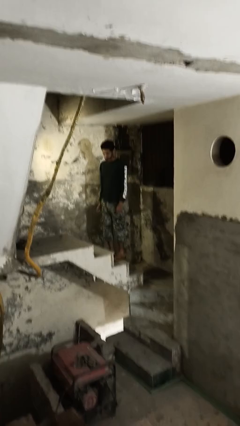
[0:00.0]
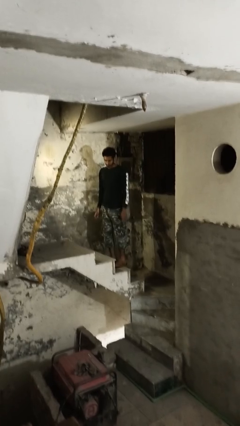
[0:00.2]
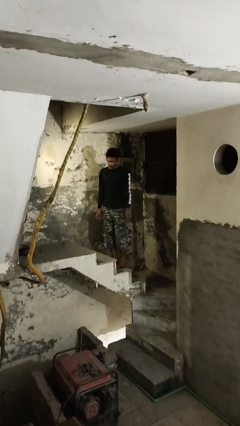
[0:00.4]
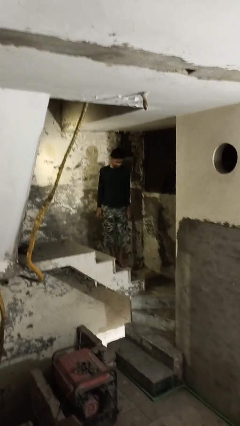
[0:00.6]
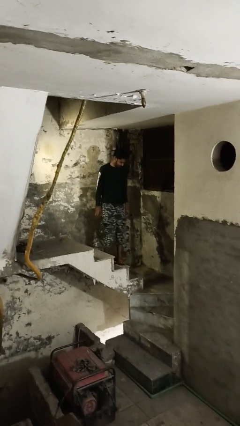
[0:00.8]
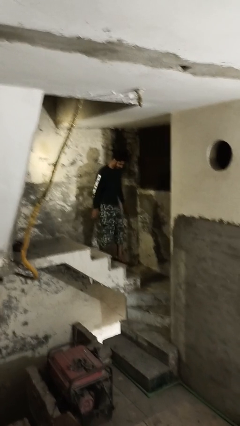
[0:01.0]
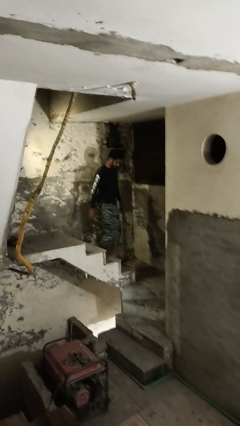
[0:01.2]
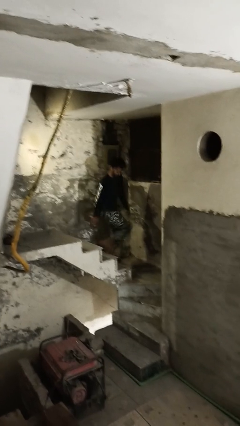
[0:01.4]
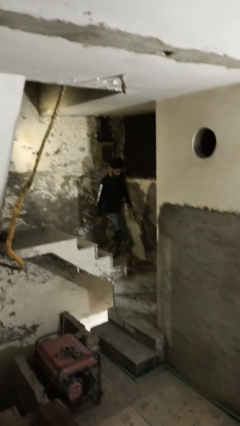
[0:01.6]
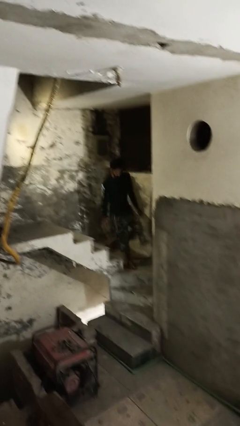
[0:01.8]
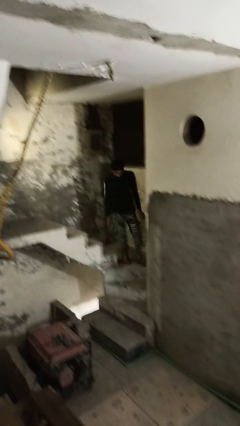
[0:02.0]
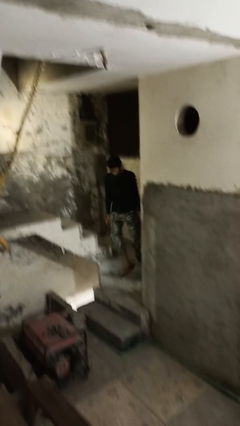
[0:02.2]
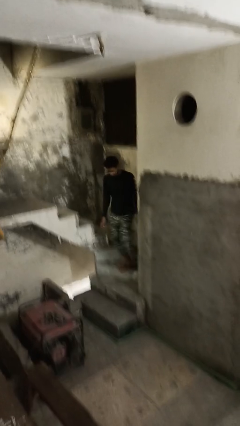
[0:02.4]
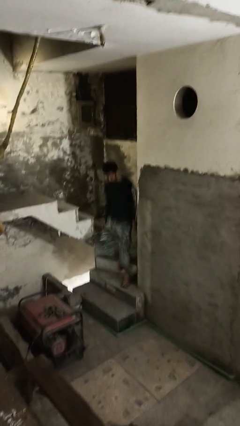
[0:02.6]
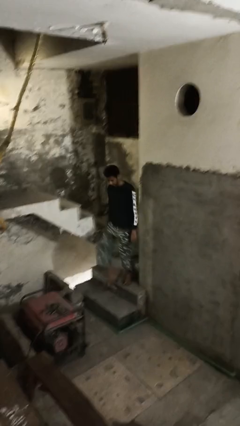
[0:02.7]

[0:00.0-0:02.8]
person climbs down stairs

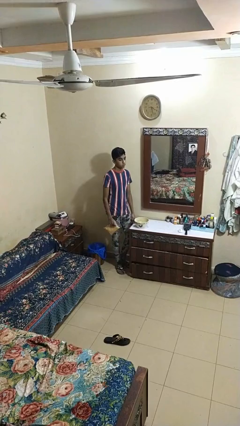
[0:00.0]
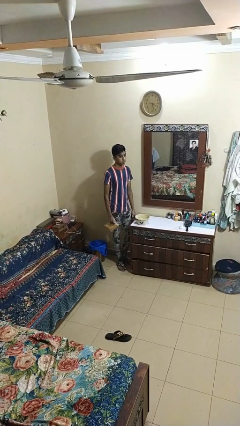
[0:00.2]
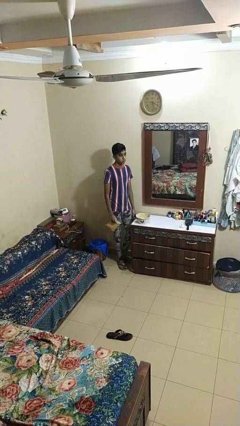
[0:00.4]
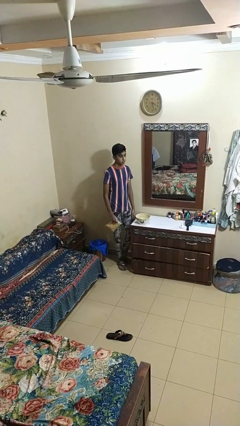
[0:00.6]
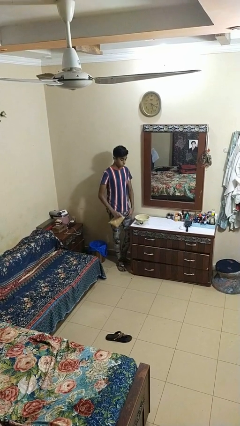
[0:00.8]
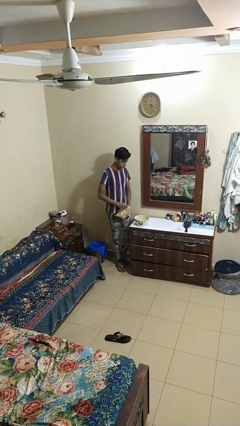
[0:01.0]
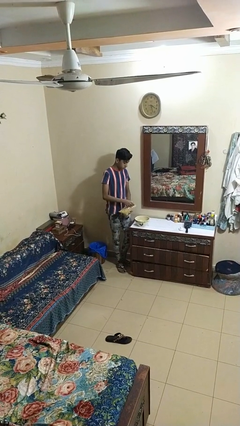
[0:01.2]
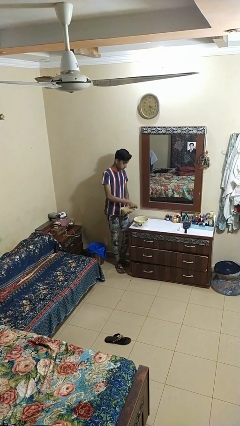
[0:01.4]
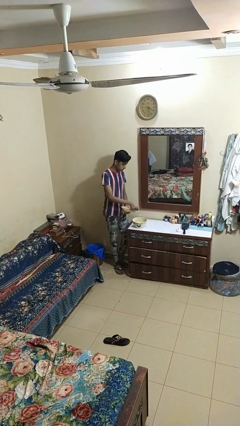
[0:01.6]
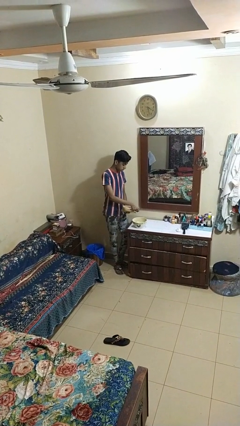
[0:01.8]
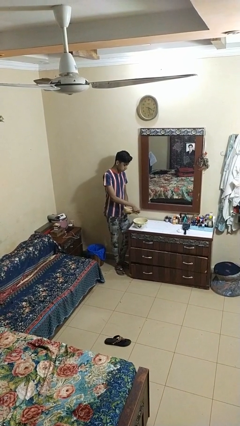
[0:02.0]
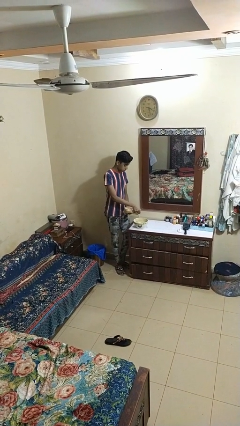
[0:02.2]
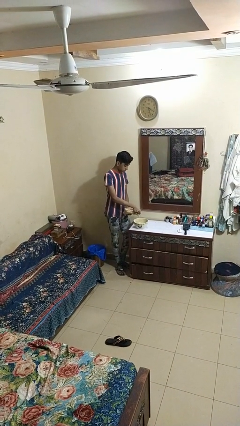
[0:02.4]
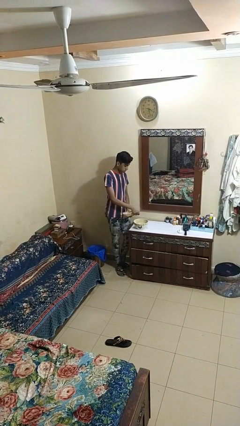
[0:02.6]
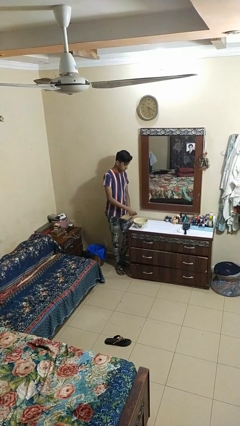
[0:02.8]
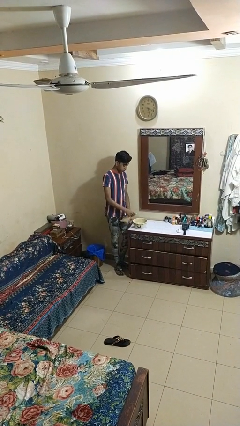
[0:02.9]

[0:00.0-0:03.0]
person pours into bowl

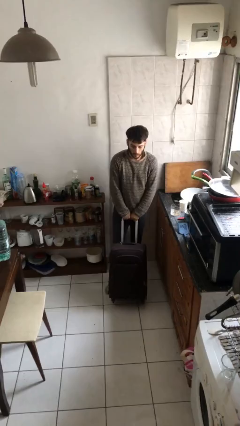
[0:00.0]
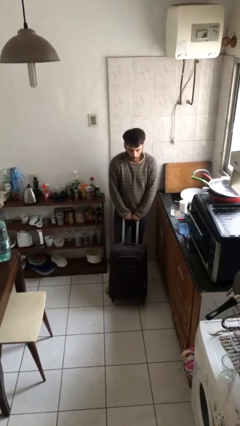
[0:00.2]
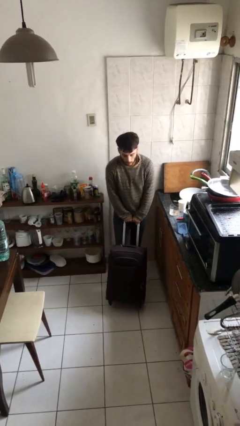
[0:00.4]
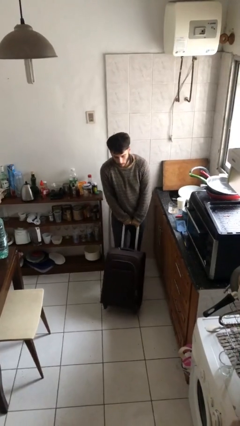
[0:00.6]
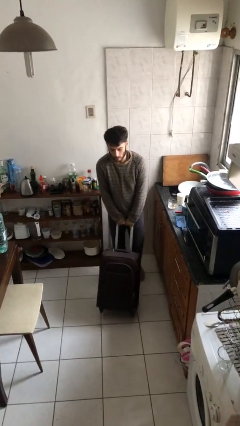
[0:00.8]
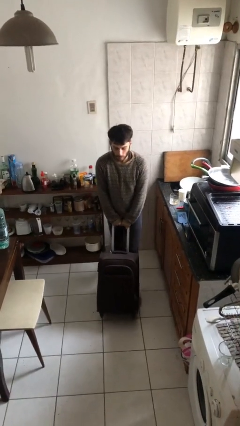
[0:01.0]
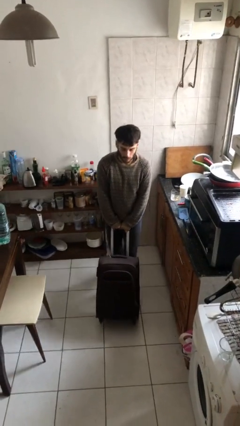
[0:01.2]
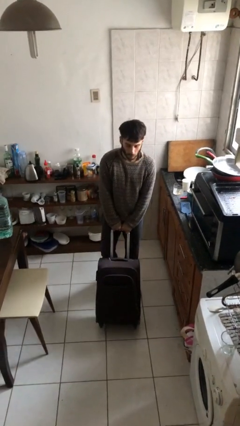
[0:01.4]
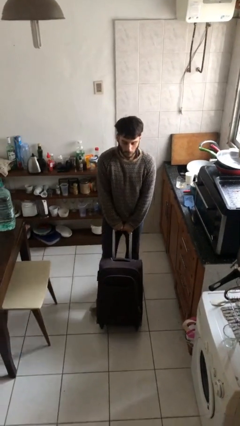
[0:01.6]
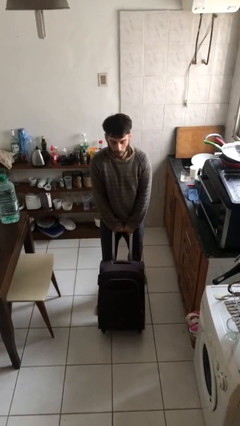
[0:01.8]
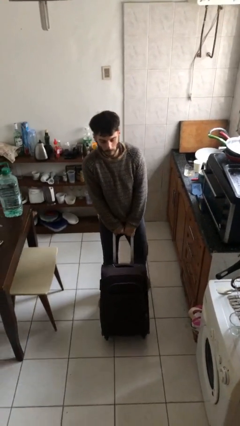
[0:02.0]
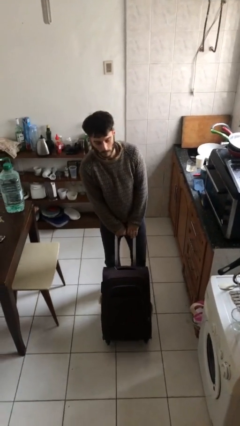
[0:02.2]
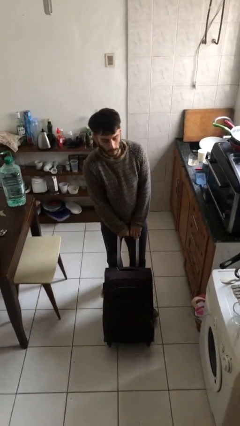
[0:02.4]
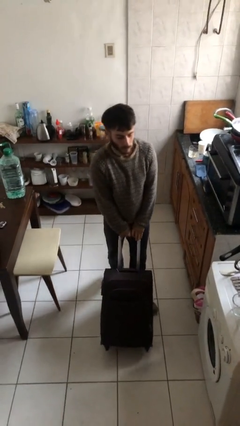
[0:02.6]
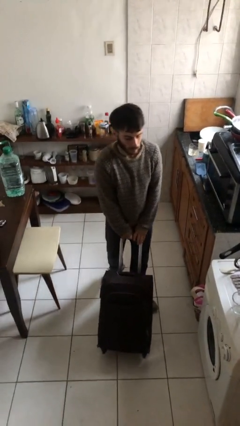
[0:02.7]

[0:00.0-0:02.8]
person pushes wheeled cart

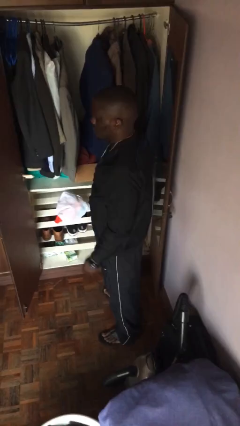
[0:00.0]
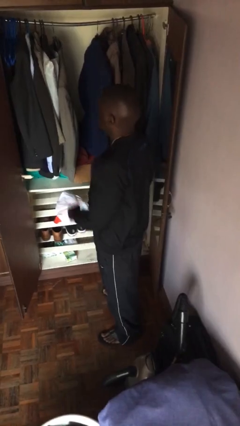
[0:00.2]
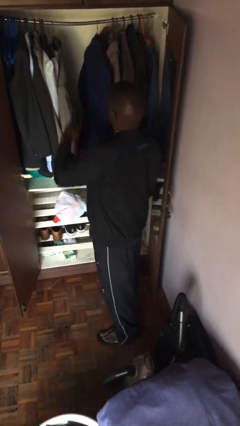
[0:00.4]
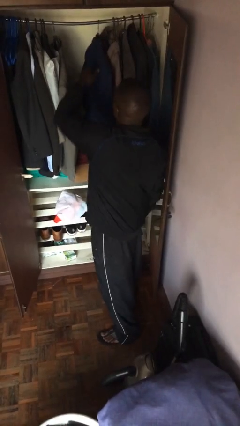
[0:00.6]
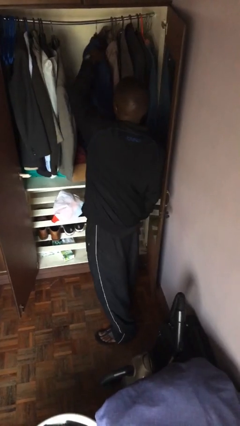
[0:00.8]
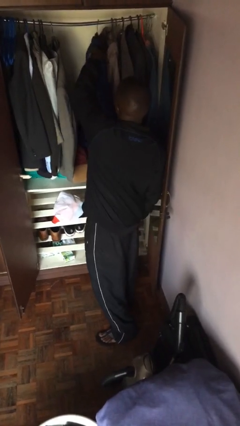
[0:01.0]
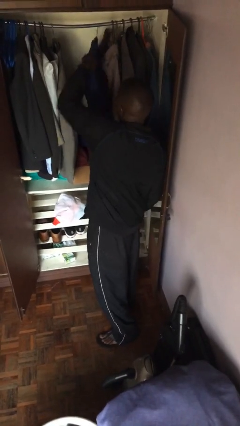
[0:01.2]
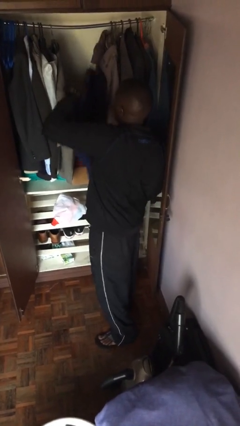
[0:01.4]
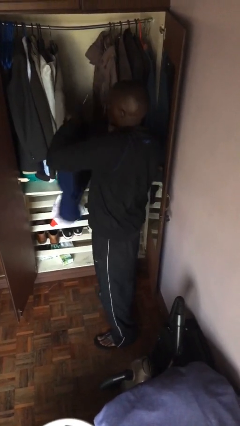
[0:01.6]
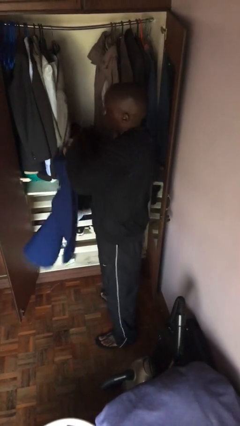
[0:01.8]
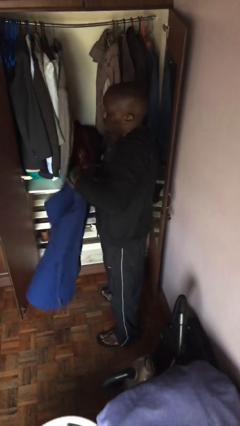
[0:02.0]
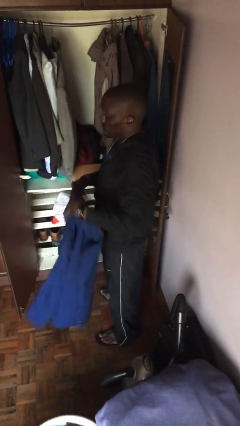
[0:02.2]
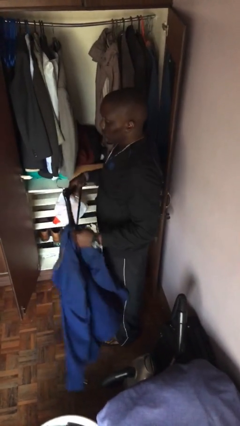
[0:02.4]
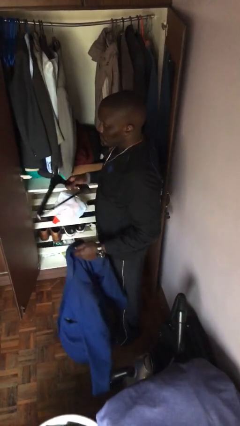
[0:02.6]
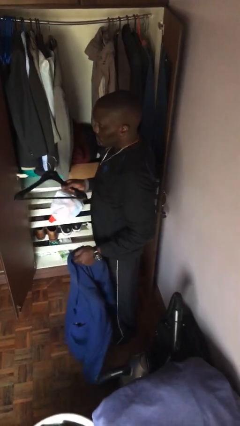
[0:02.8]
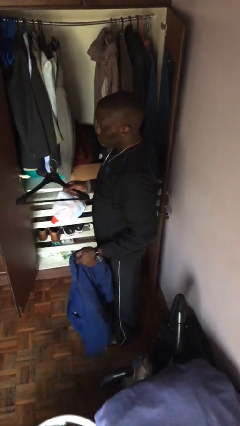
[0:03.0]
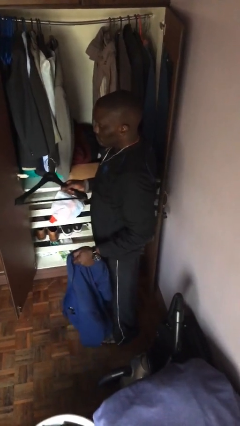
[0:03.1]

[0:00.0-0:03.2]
person takes clothes from closet

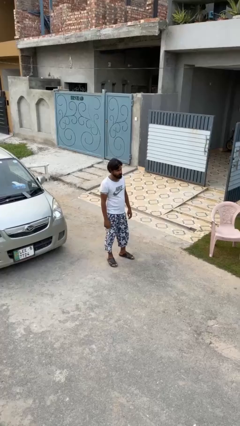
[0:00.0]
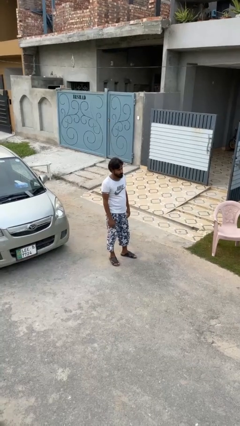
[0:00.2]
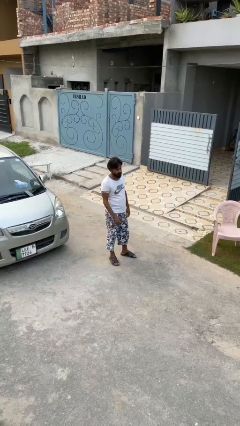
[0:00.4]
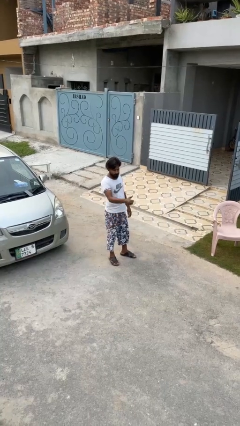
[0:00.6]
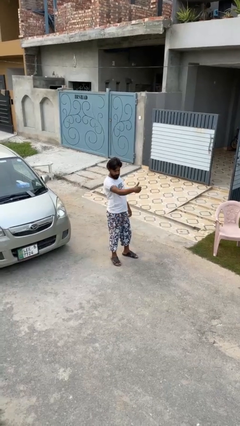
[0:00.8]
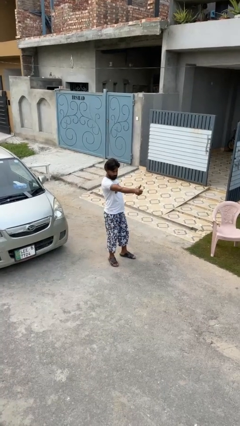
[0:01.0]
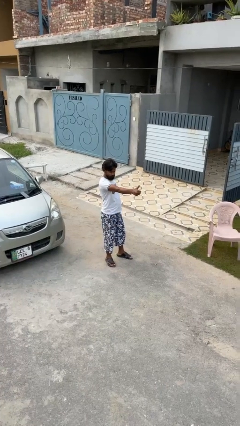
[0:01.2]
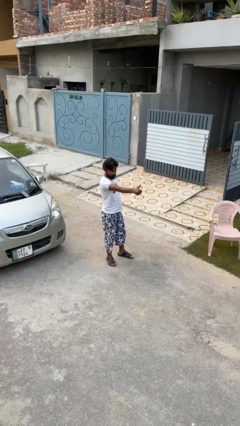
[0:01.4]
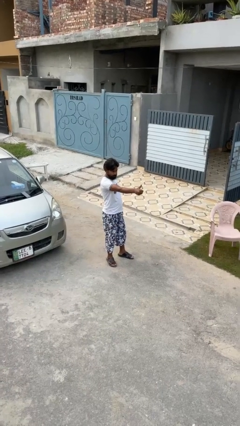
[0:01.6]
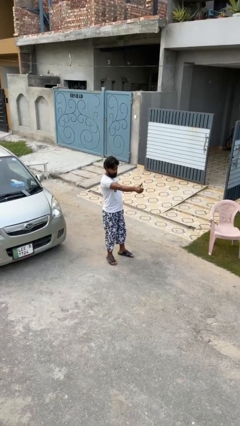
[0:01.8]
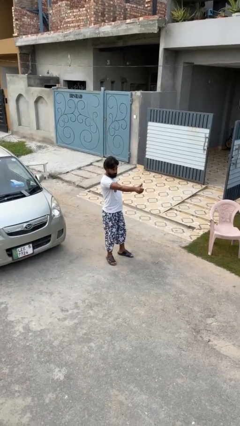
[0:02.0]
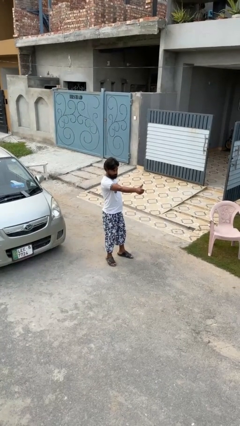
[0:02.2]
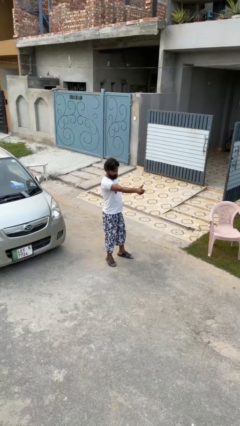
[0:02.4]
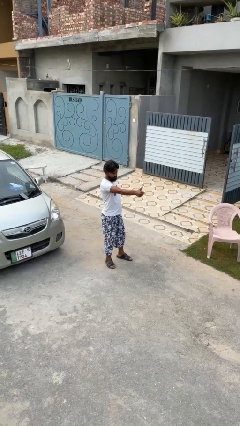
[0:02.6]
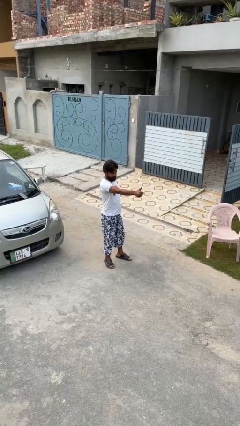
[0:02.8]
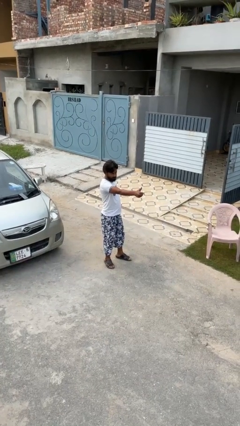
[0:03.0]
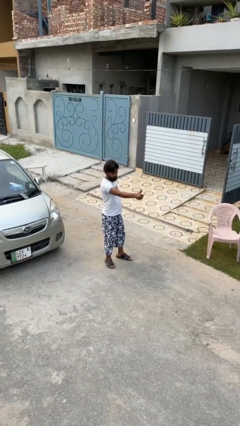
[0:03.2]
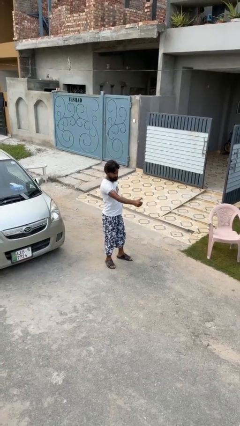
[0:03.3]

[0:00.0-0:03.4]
person gestures thumbs up

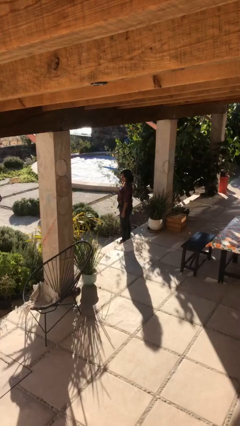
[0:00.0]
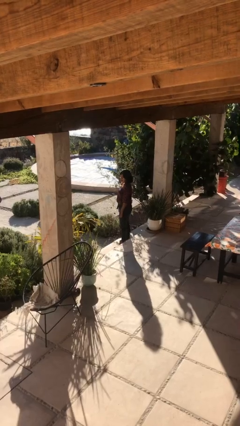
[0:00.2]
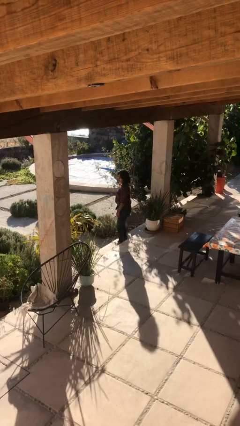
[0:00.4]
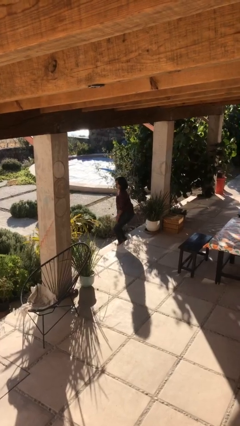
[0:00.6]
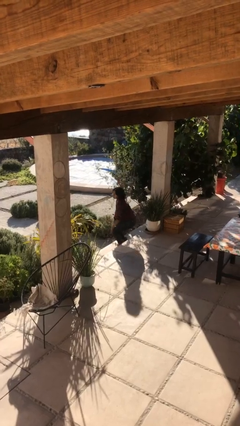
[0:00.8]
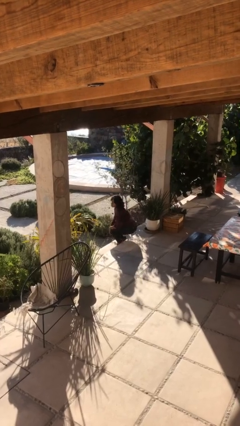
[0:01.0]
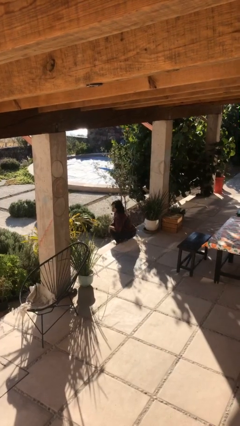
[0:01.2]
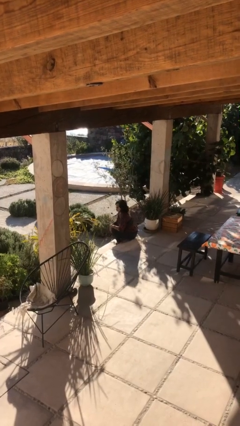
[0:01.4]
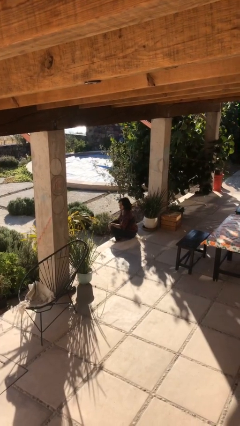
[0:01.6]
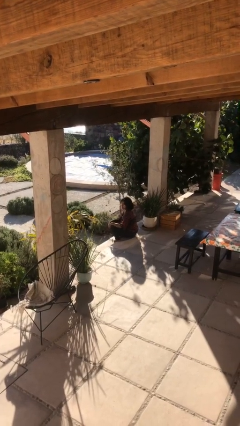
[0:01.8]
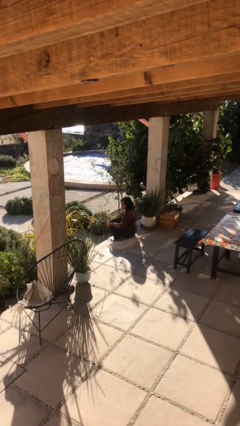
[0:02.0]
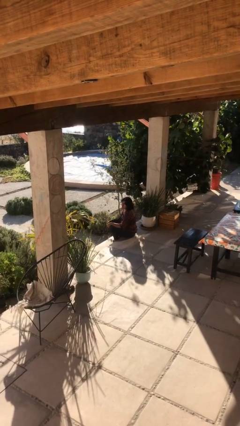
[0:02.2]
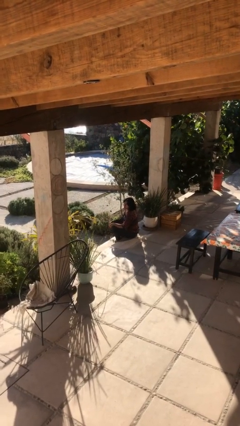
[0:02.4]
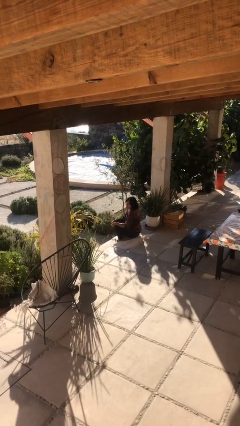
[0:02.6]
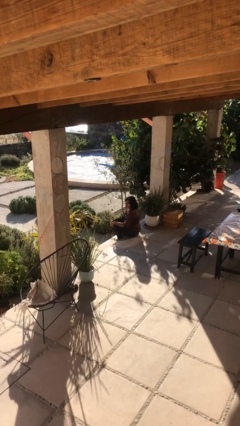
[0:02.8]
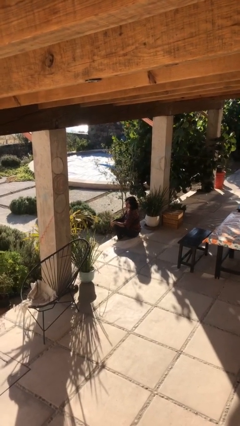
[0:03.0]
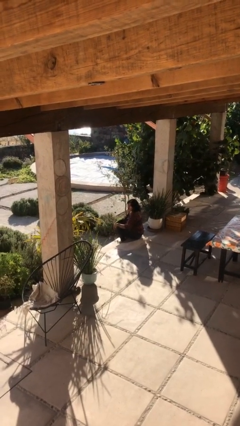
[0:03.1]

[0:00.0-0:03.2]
person sits down
